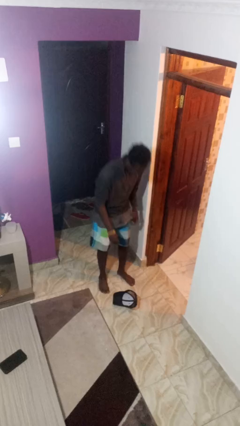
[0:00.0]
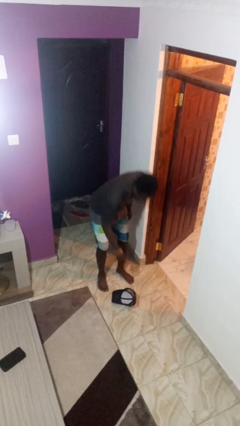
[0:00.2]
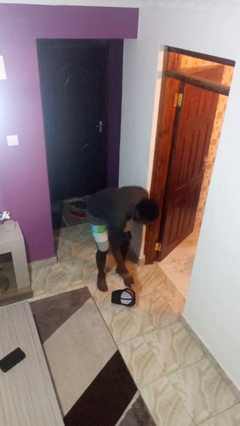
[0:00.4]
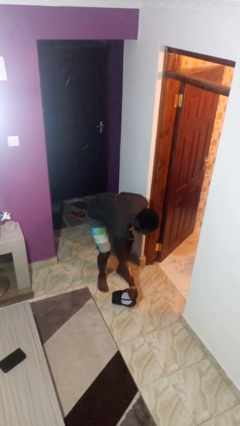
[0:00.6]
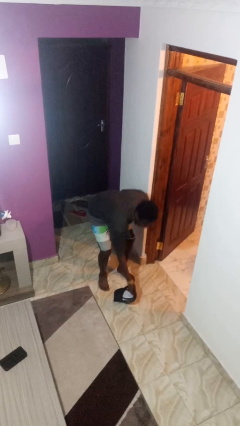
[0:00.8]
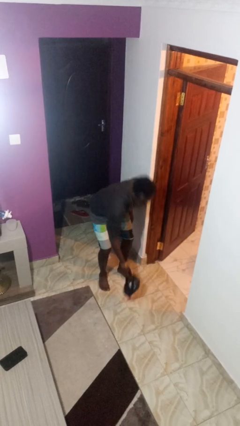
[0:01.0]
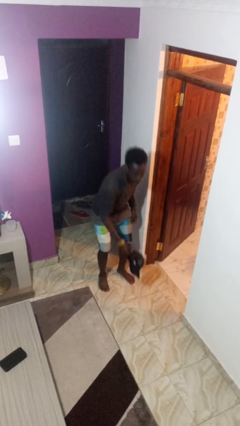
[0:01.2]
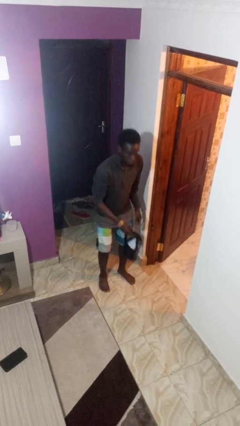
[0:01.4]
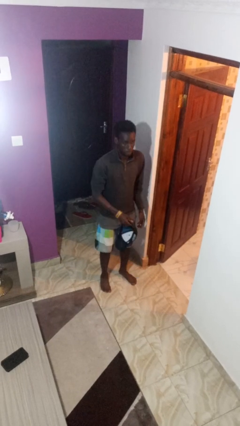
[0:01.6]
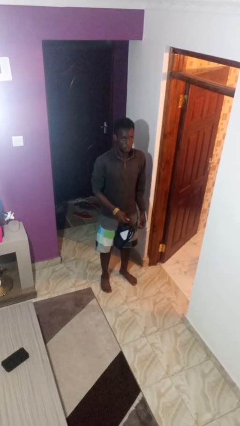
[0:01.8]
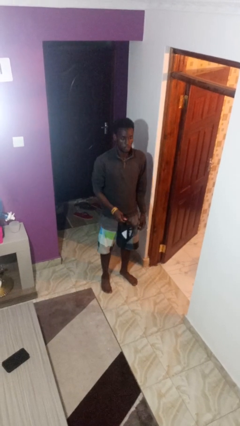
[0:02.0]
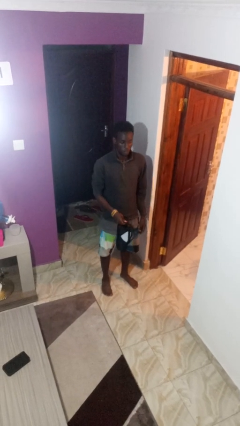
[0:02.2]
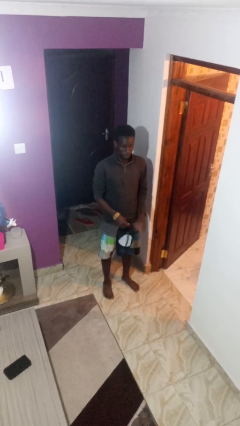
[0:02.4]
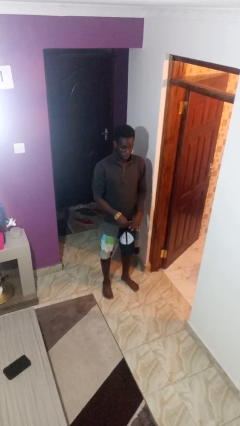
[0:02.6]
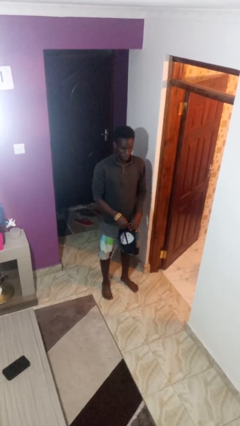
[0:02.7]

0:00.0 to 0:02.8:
person picks up object from floor

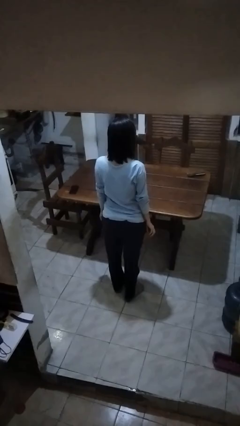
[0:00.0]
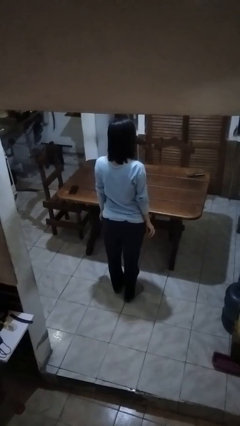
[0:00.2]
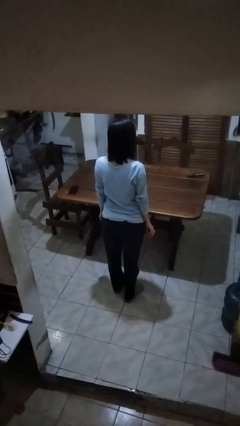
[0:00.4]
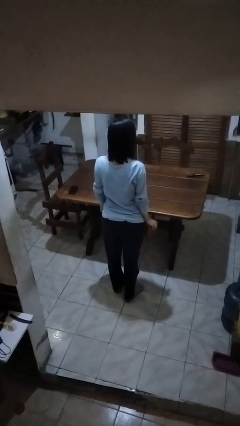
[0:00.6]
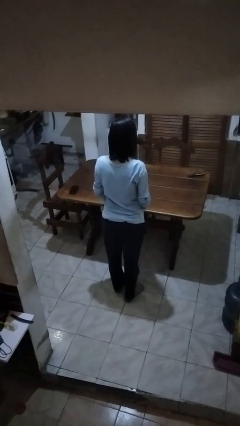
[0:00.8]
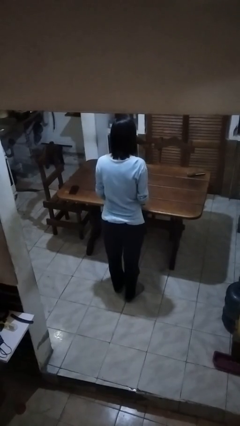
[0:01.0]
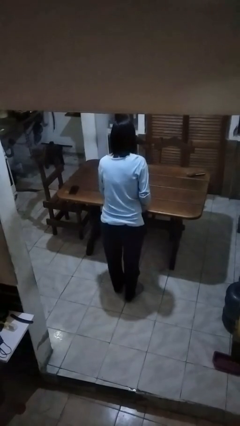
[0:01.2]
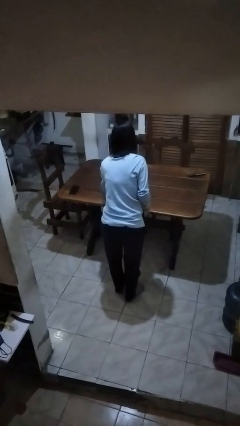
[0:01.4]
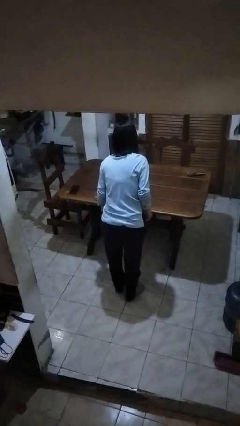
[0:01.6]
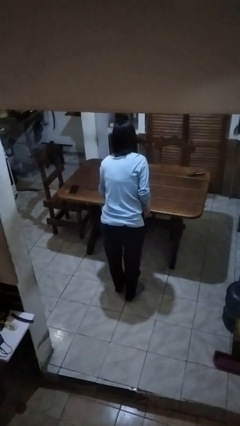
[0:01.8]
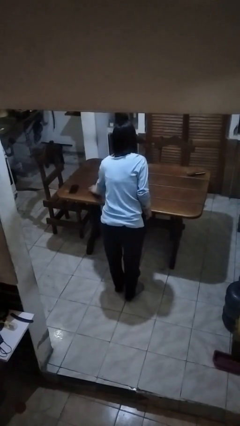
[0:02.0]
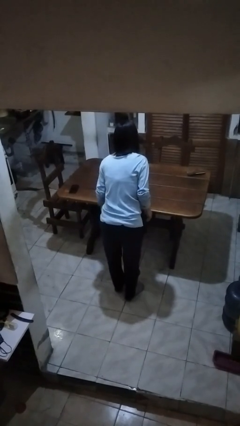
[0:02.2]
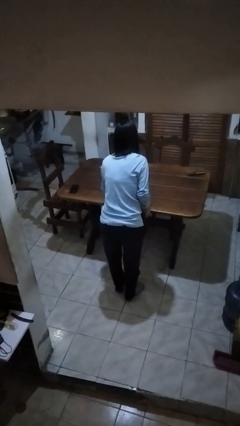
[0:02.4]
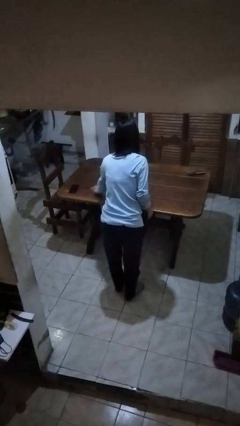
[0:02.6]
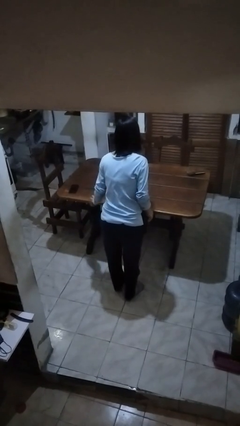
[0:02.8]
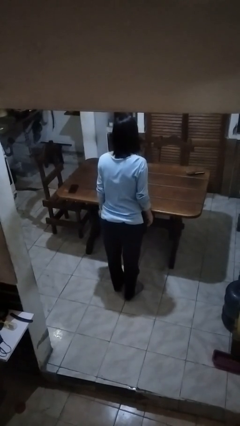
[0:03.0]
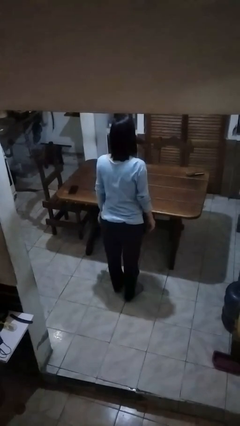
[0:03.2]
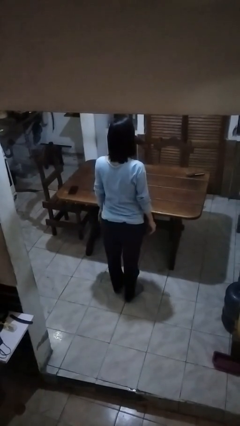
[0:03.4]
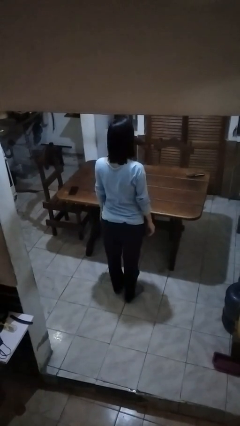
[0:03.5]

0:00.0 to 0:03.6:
person cleans table with rag

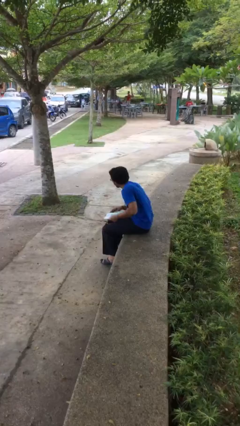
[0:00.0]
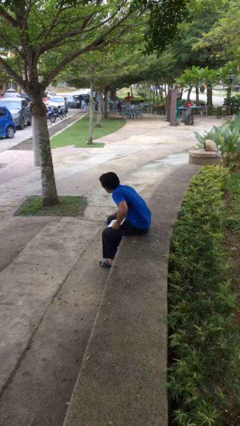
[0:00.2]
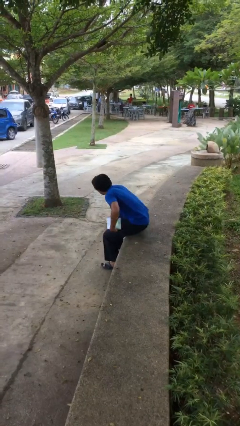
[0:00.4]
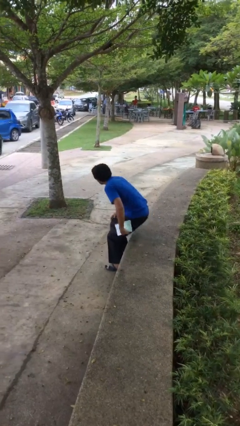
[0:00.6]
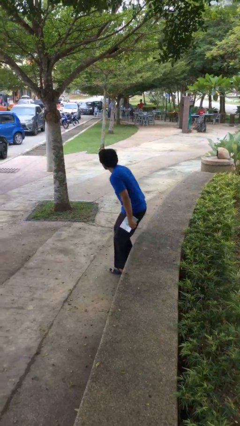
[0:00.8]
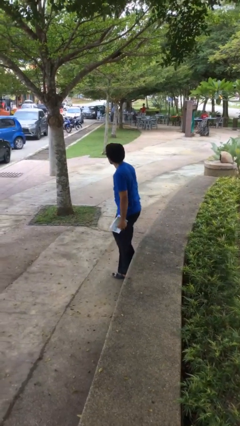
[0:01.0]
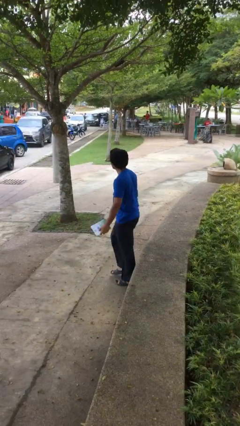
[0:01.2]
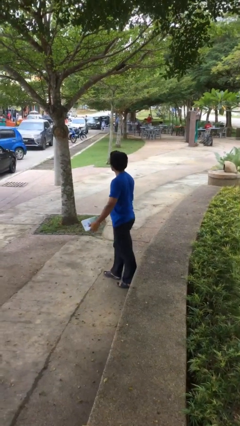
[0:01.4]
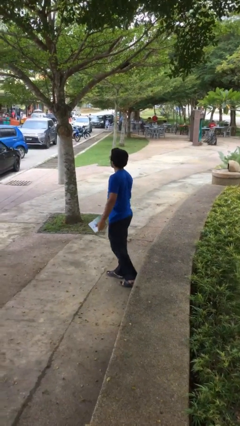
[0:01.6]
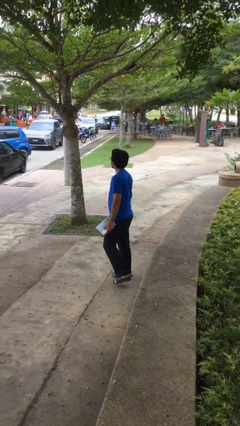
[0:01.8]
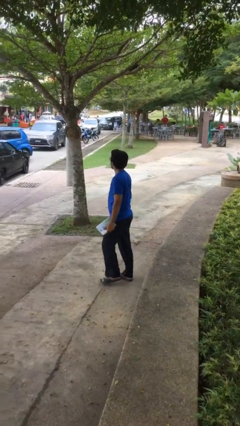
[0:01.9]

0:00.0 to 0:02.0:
person stands up

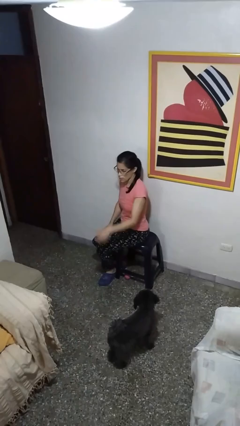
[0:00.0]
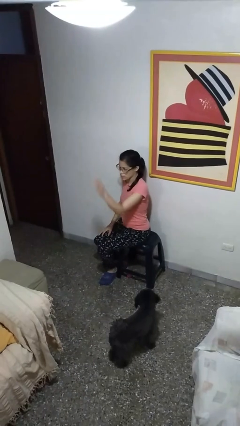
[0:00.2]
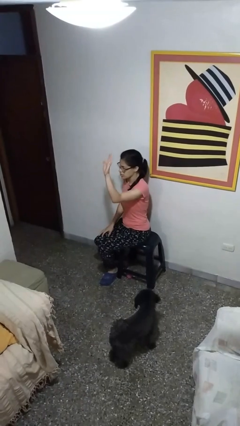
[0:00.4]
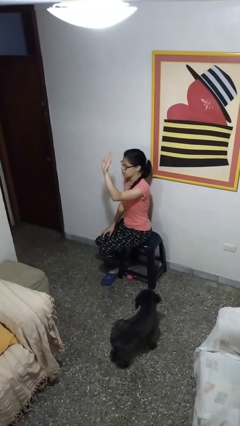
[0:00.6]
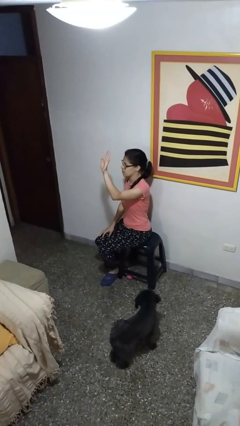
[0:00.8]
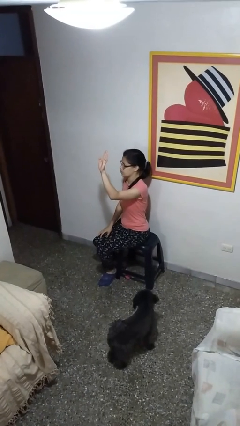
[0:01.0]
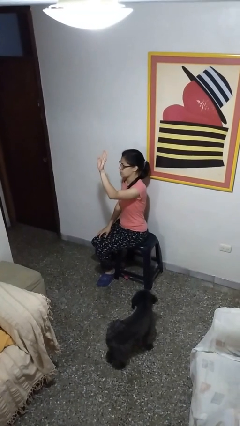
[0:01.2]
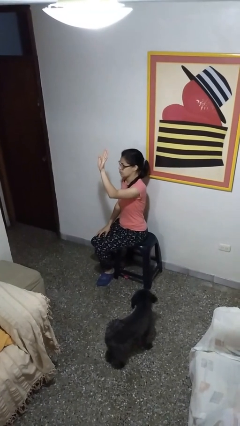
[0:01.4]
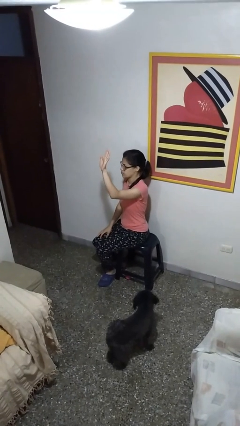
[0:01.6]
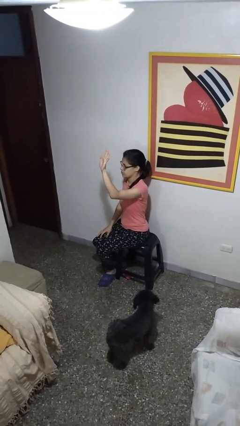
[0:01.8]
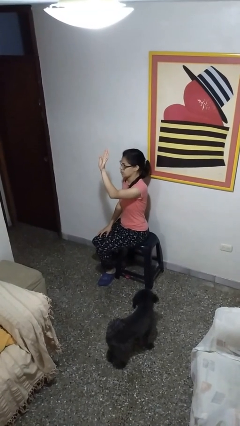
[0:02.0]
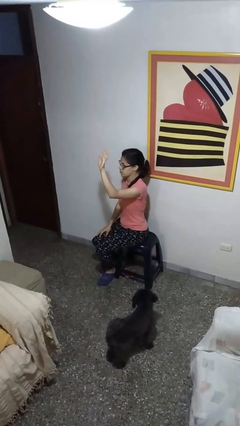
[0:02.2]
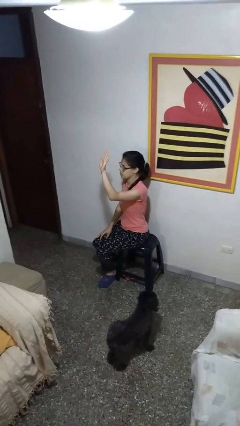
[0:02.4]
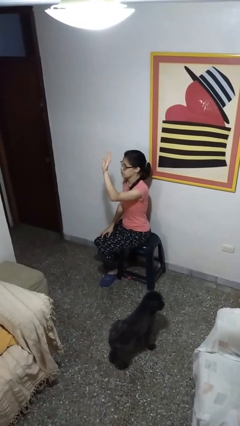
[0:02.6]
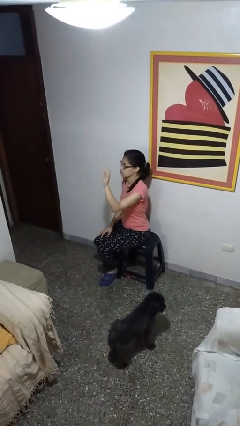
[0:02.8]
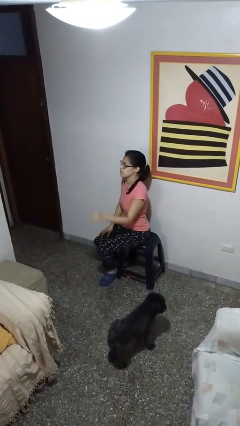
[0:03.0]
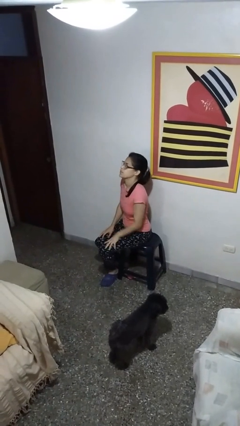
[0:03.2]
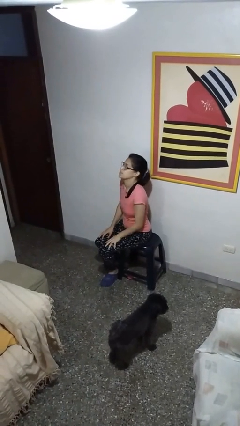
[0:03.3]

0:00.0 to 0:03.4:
person gestures raise hand

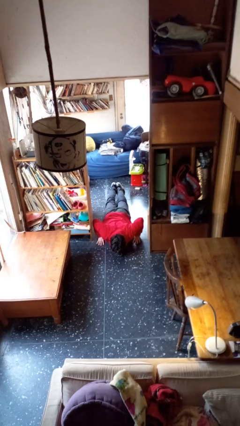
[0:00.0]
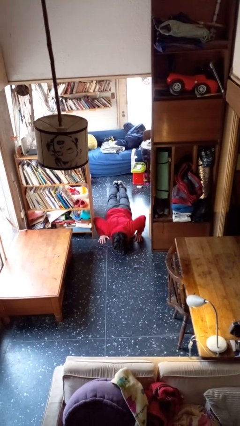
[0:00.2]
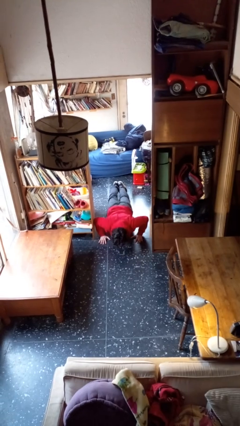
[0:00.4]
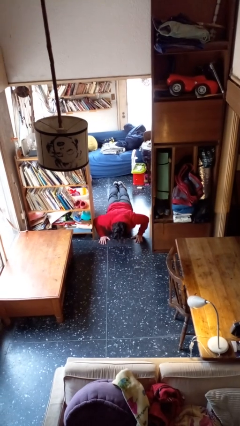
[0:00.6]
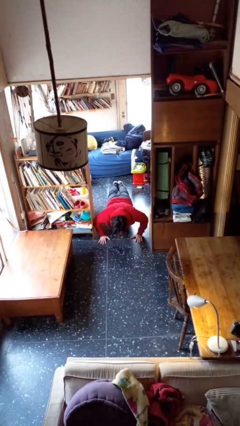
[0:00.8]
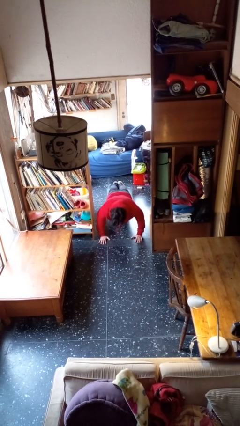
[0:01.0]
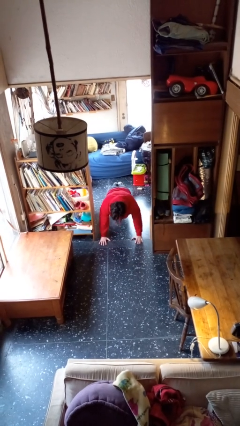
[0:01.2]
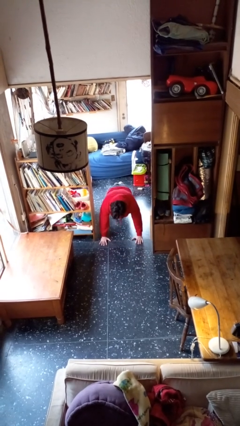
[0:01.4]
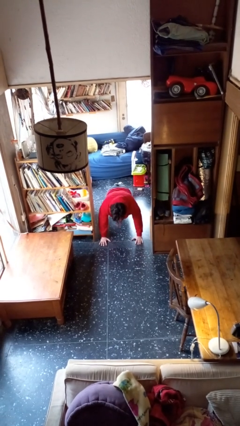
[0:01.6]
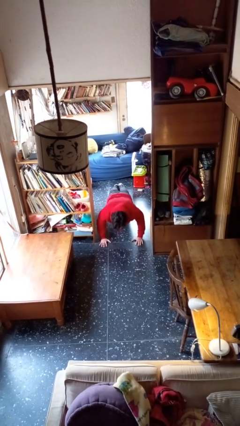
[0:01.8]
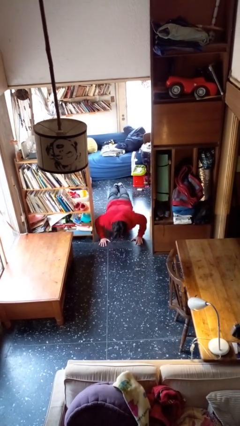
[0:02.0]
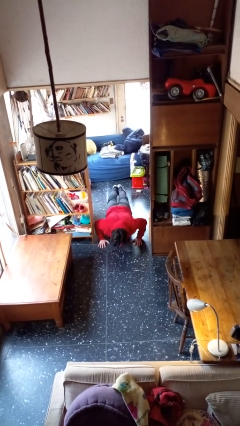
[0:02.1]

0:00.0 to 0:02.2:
person exercises with pushup

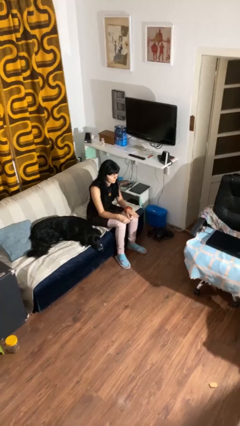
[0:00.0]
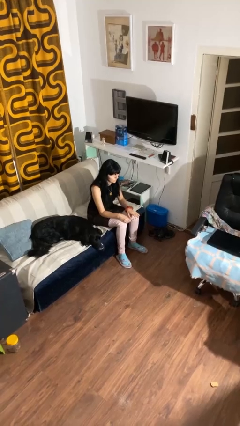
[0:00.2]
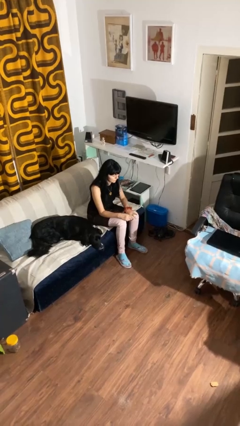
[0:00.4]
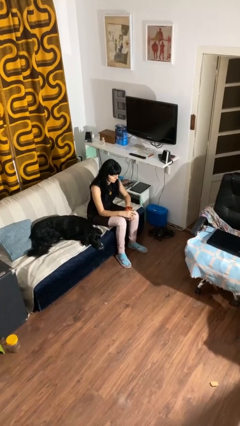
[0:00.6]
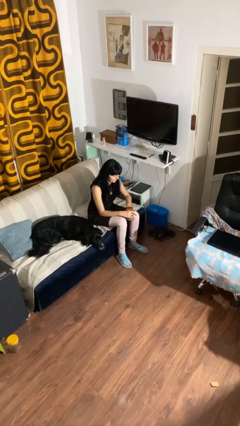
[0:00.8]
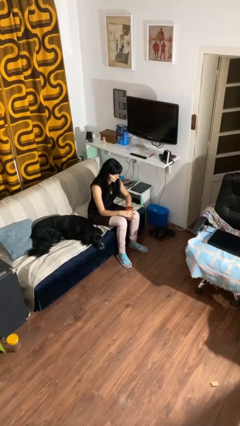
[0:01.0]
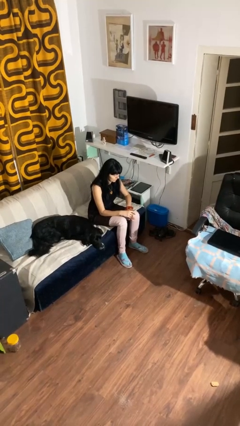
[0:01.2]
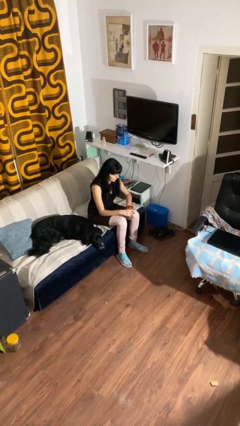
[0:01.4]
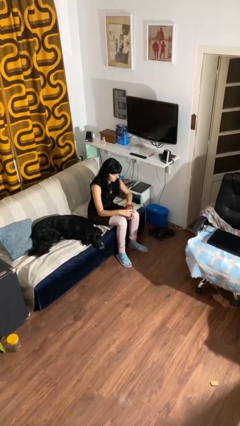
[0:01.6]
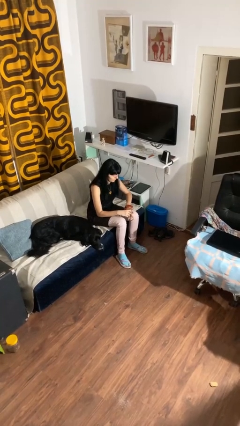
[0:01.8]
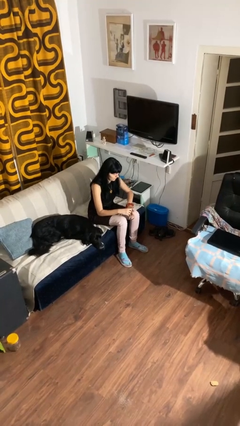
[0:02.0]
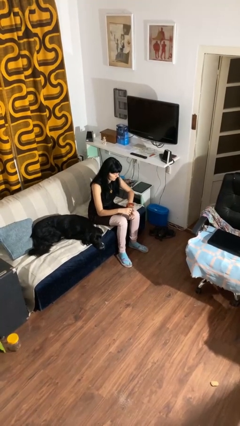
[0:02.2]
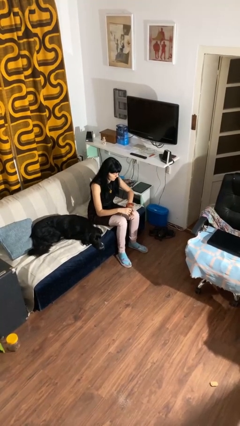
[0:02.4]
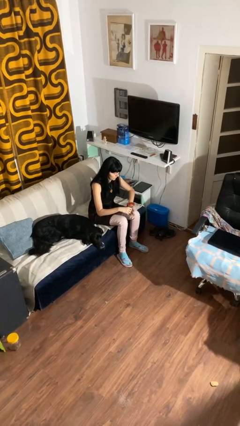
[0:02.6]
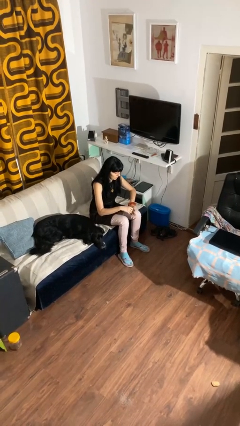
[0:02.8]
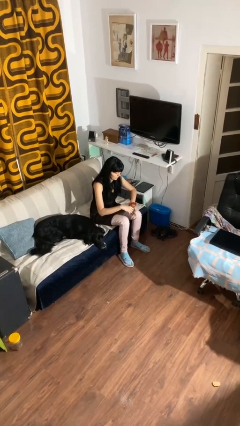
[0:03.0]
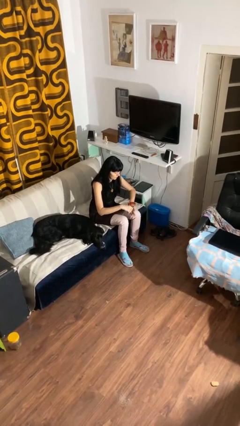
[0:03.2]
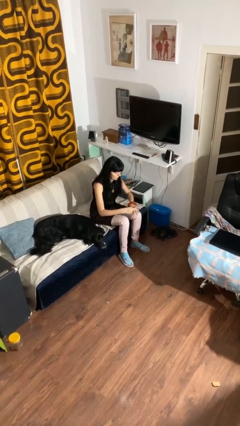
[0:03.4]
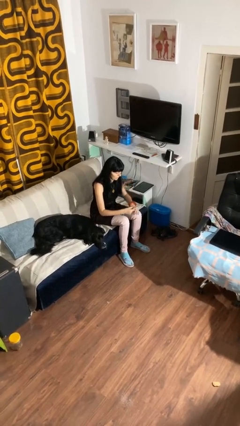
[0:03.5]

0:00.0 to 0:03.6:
person clips fingernails

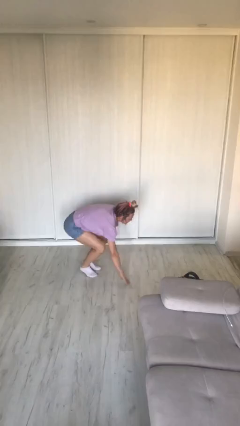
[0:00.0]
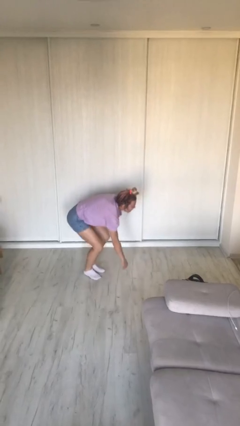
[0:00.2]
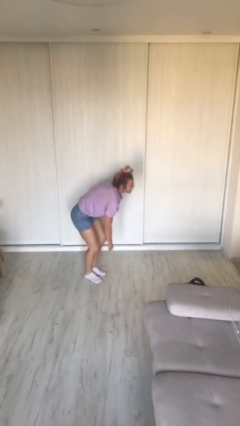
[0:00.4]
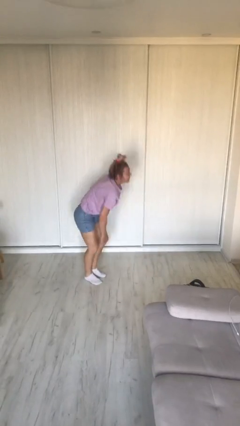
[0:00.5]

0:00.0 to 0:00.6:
person stands up from floor
